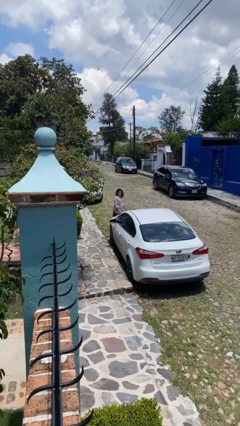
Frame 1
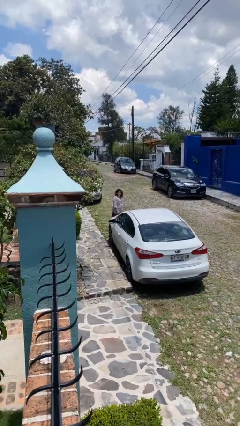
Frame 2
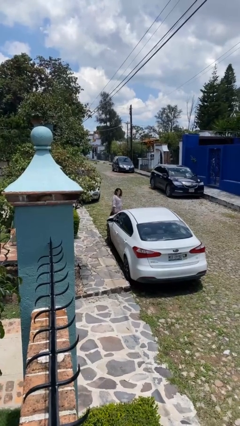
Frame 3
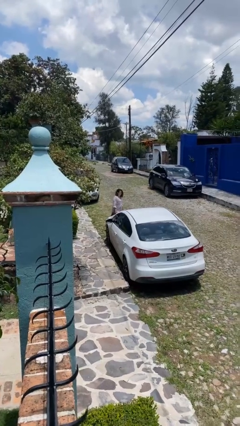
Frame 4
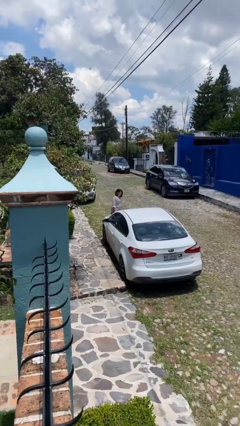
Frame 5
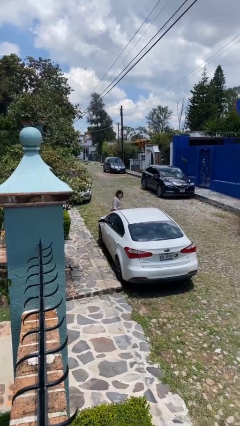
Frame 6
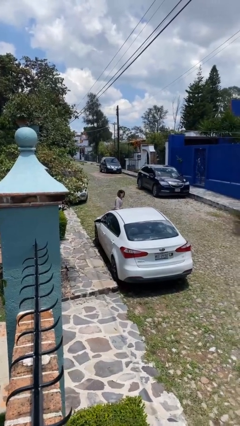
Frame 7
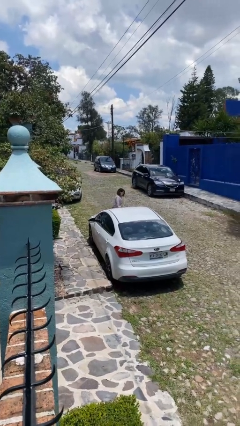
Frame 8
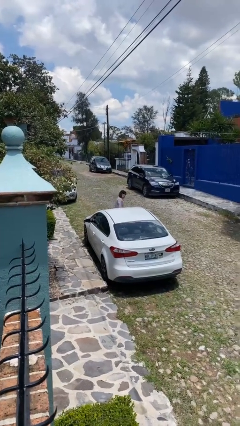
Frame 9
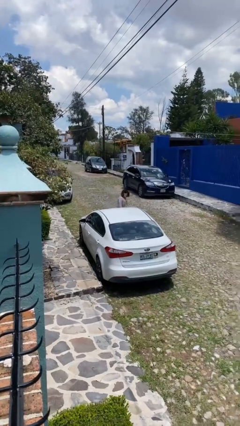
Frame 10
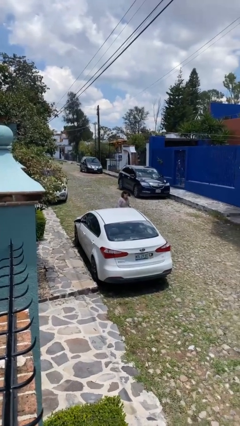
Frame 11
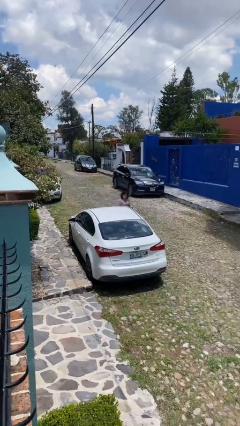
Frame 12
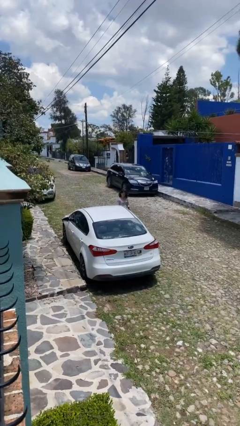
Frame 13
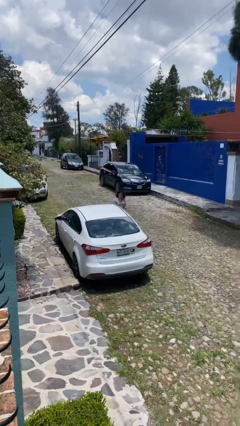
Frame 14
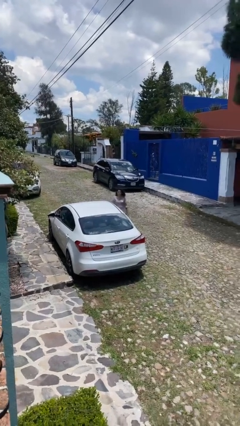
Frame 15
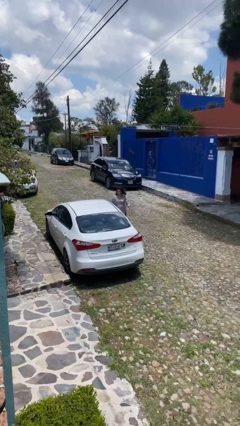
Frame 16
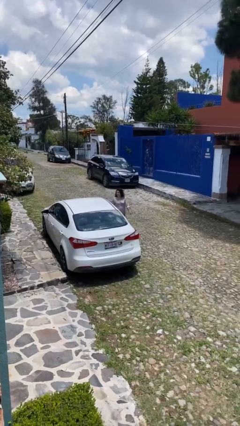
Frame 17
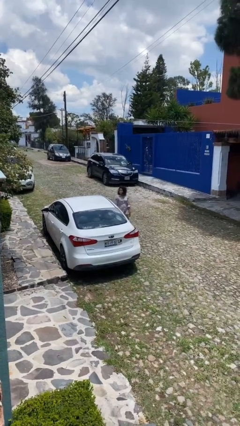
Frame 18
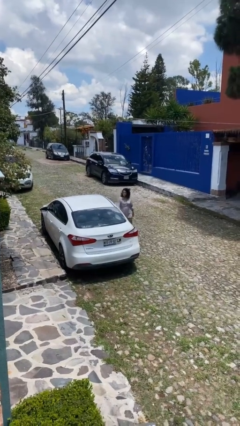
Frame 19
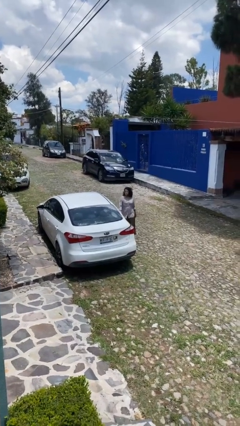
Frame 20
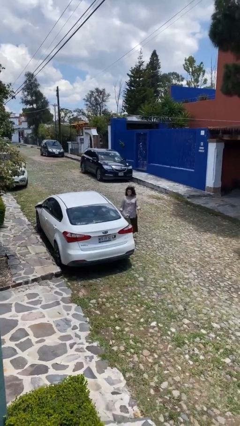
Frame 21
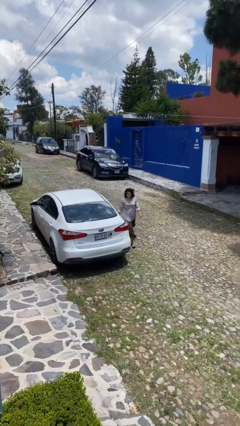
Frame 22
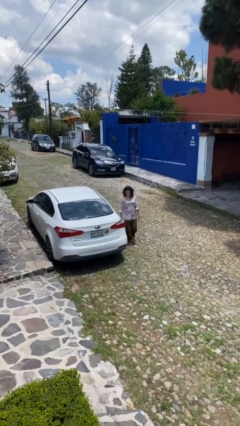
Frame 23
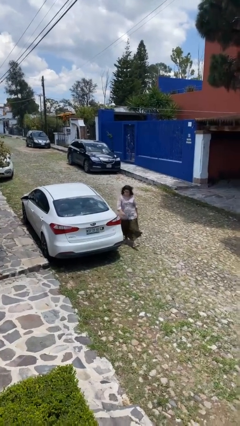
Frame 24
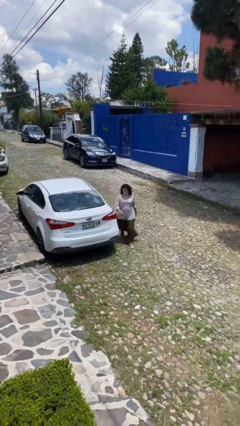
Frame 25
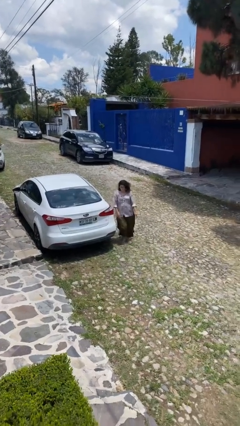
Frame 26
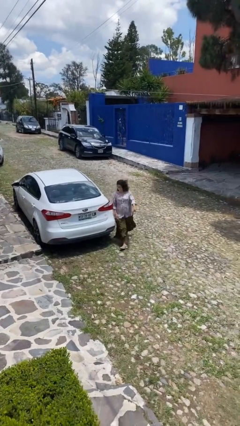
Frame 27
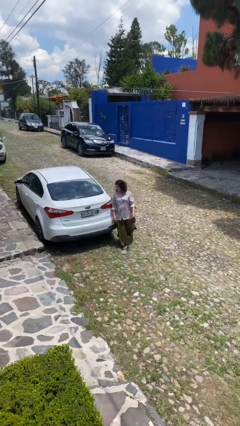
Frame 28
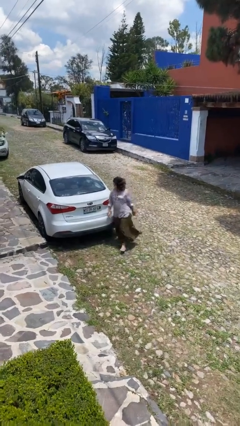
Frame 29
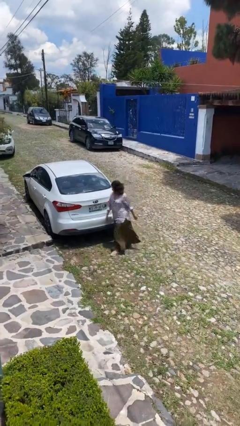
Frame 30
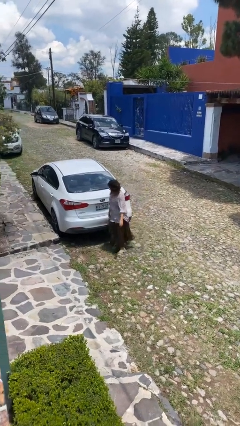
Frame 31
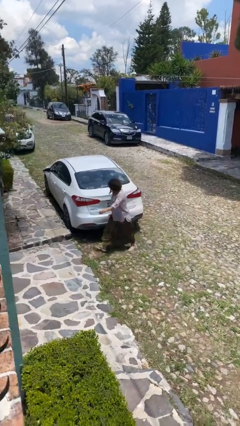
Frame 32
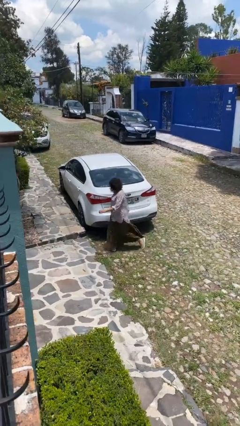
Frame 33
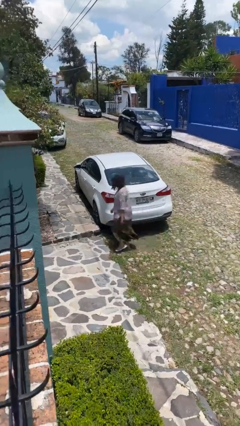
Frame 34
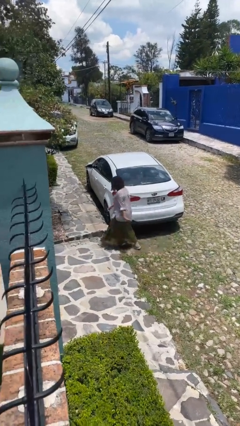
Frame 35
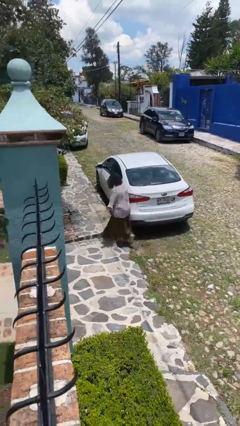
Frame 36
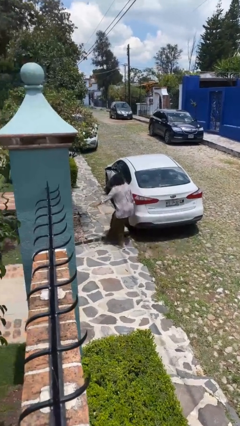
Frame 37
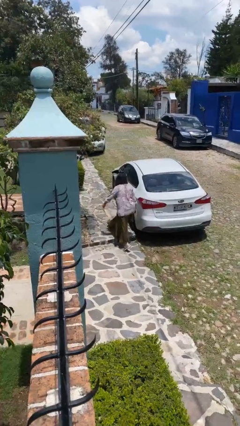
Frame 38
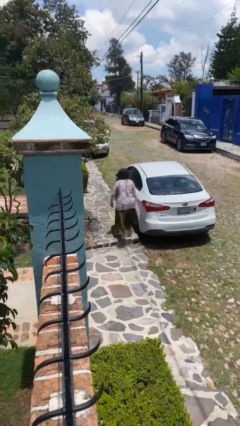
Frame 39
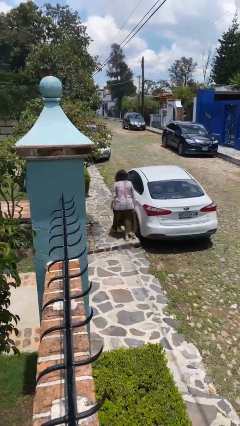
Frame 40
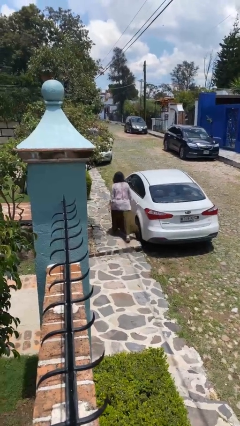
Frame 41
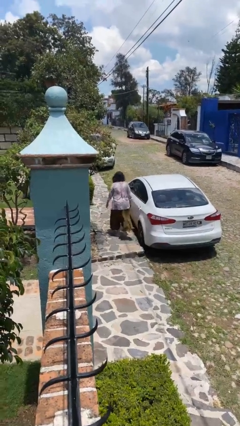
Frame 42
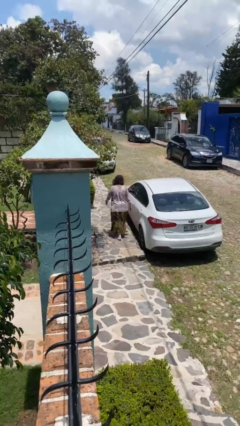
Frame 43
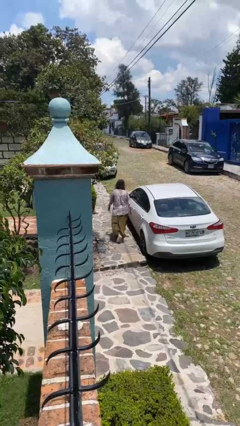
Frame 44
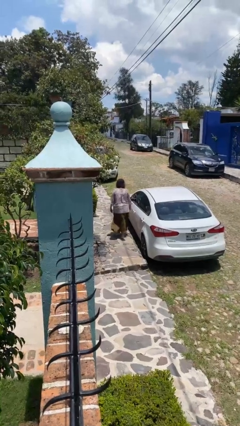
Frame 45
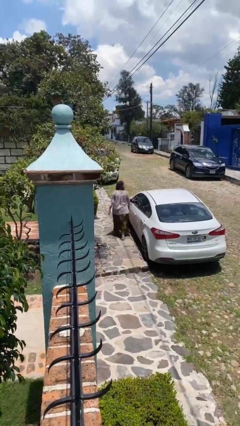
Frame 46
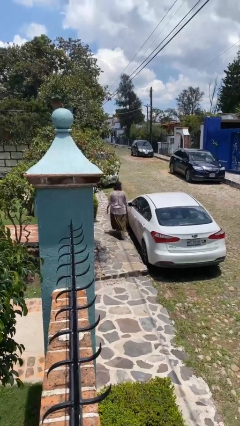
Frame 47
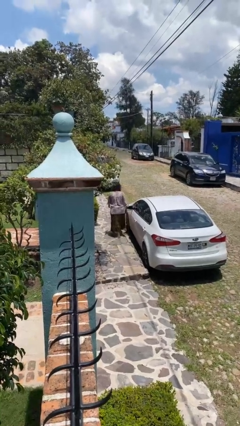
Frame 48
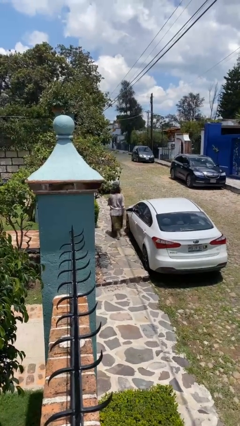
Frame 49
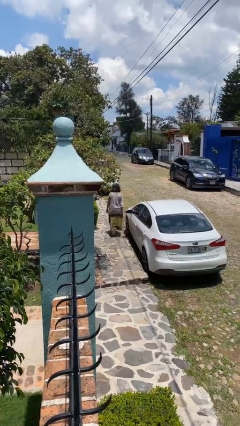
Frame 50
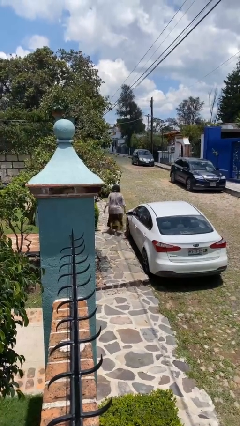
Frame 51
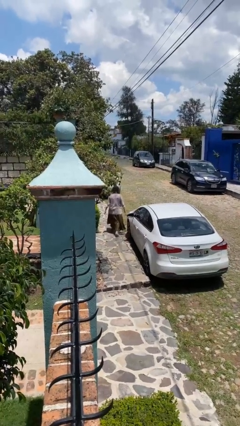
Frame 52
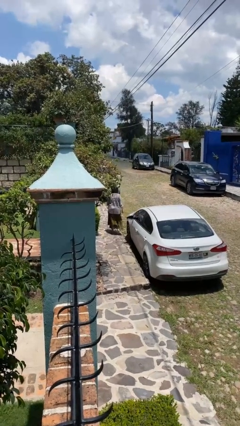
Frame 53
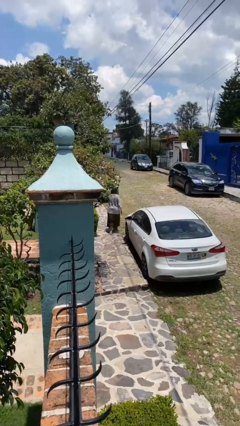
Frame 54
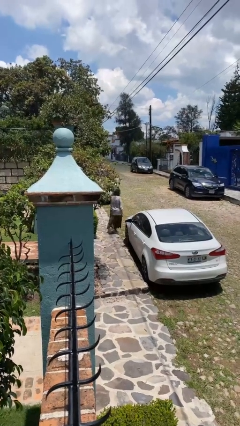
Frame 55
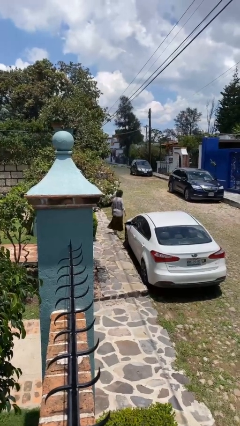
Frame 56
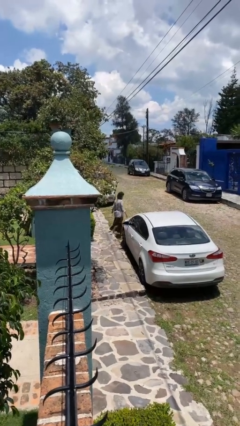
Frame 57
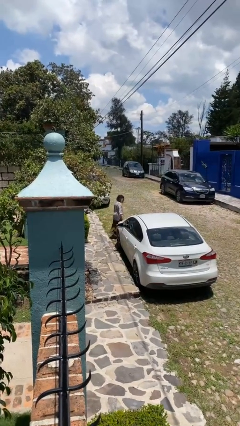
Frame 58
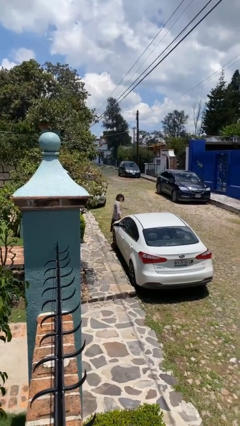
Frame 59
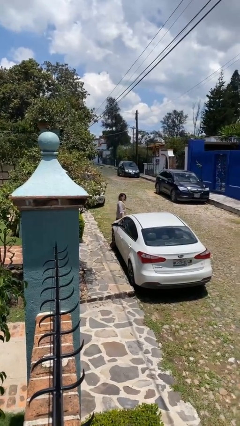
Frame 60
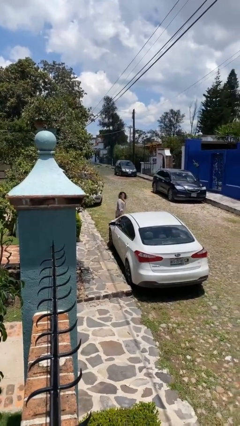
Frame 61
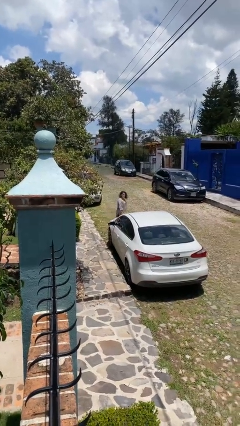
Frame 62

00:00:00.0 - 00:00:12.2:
person walks around car

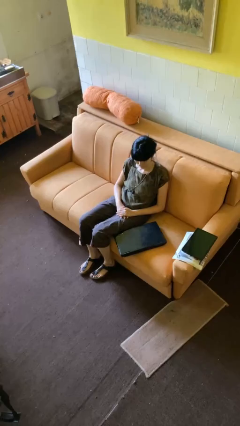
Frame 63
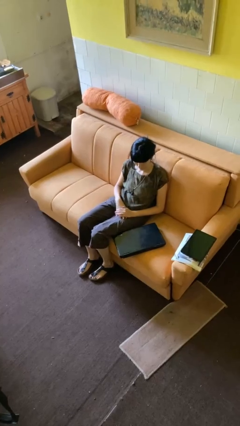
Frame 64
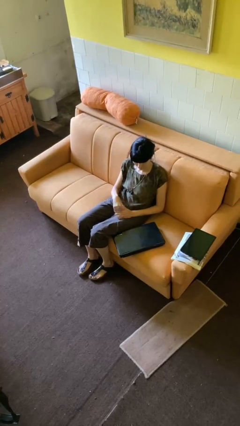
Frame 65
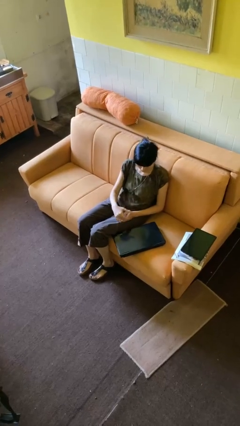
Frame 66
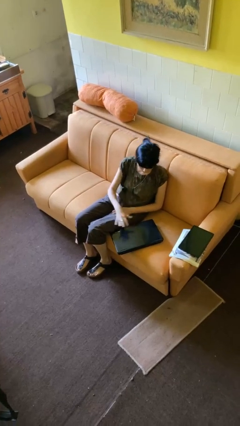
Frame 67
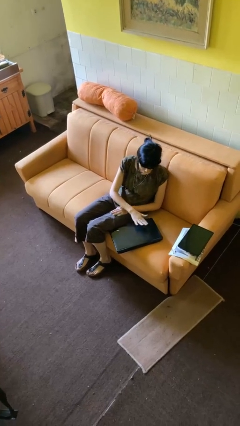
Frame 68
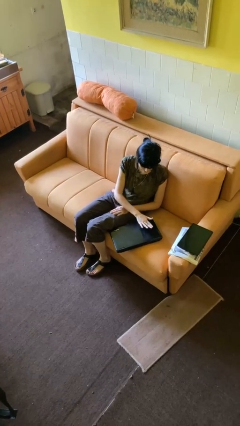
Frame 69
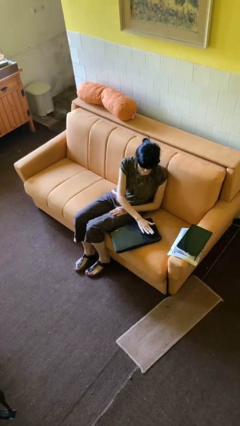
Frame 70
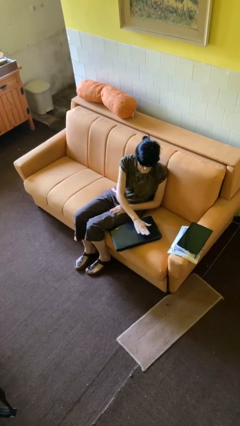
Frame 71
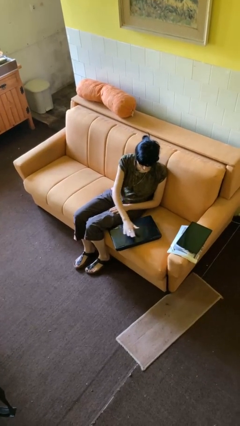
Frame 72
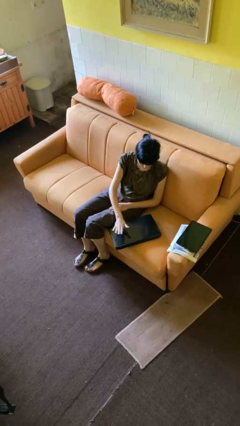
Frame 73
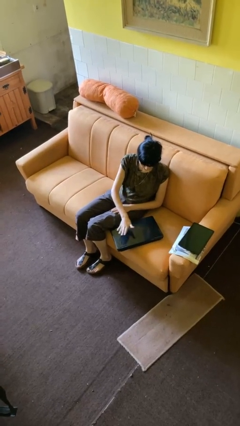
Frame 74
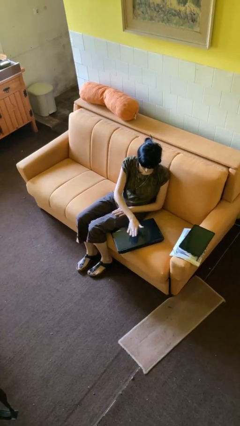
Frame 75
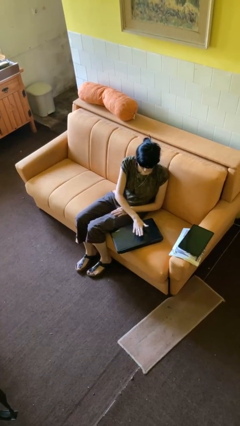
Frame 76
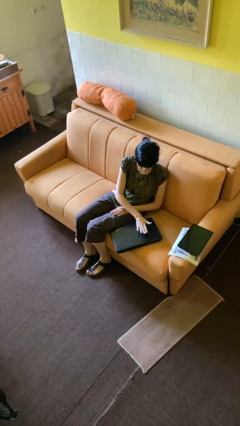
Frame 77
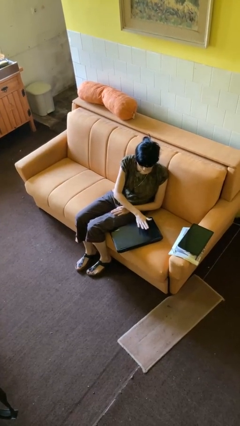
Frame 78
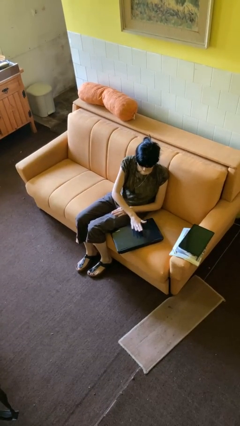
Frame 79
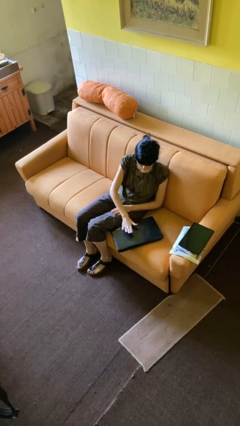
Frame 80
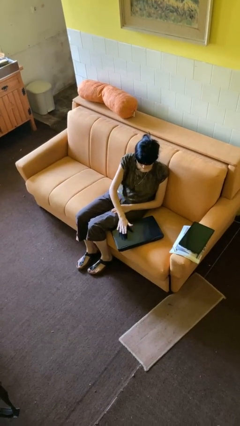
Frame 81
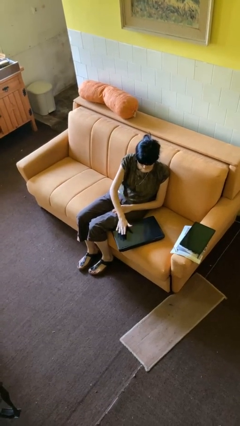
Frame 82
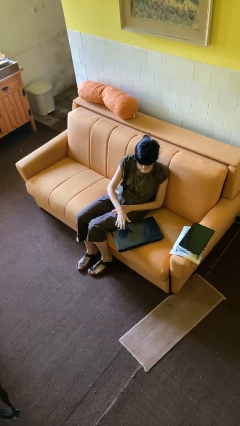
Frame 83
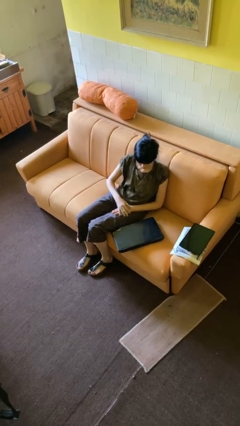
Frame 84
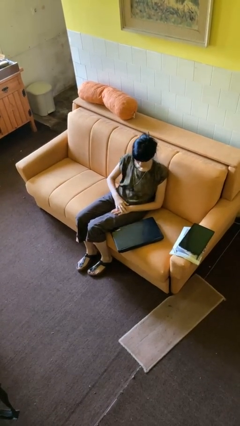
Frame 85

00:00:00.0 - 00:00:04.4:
person waves hand over object

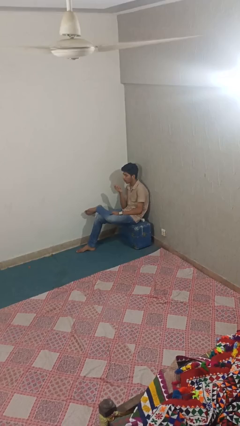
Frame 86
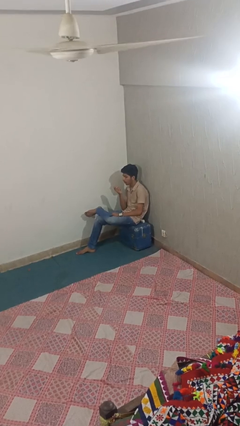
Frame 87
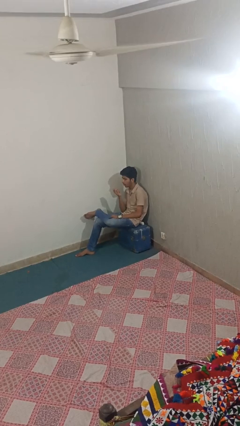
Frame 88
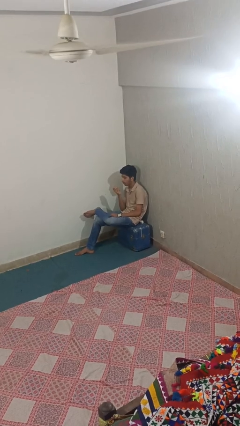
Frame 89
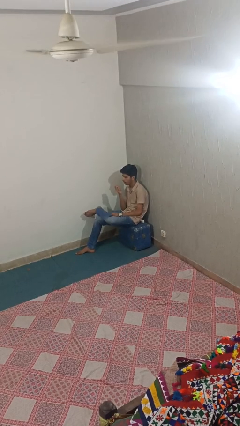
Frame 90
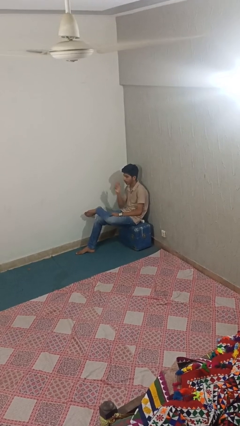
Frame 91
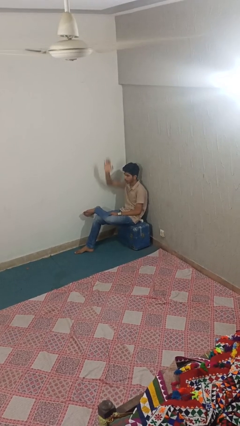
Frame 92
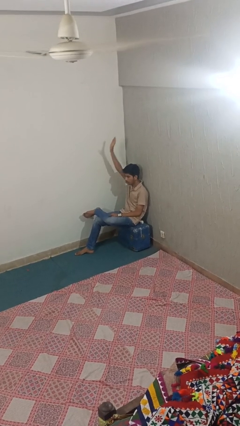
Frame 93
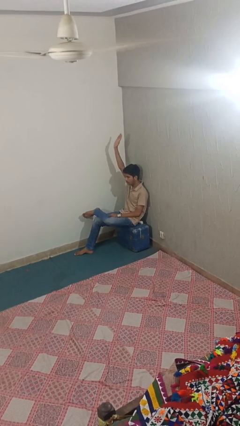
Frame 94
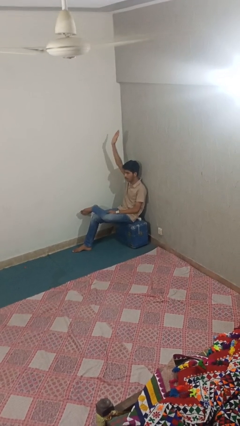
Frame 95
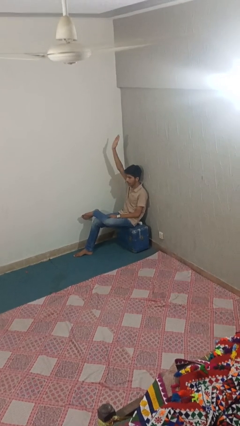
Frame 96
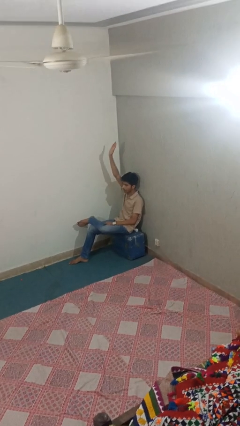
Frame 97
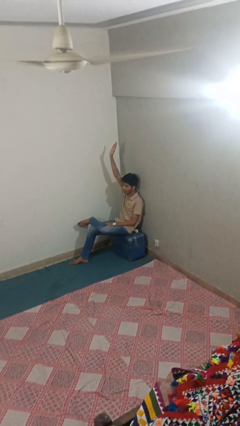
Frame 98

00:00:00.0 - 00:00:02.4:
person gestures raise hand
